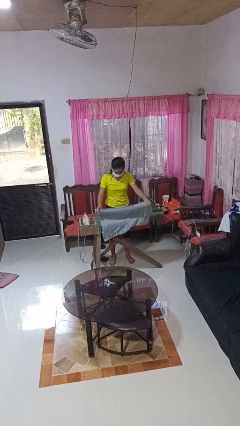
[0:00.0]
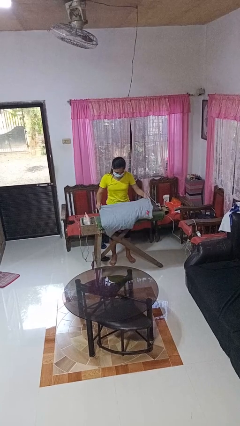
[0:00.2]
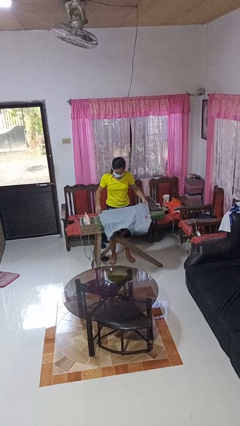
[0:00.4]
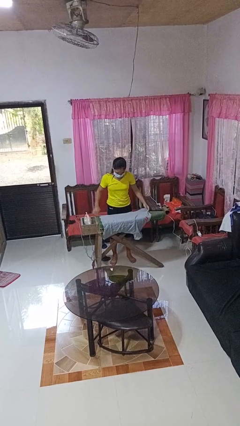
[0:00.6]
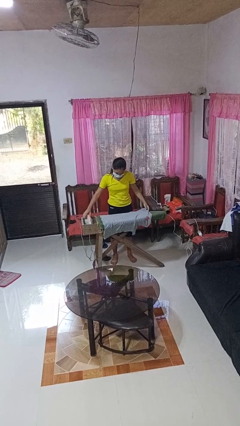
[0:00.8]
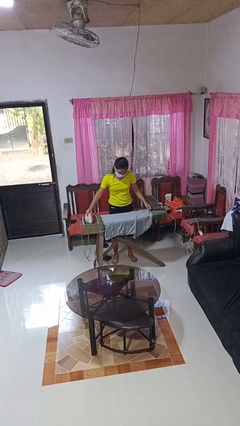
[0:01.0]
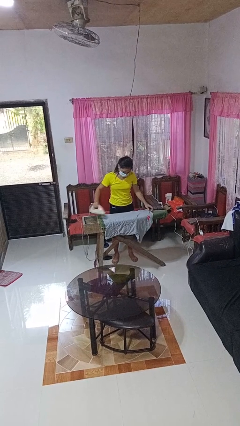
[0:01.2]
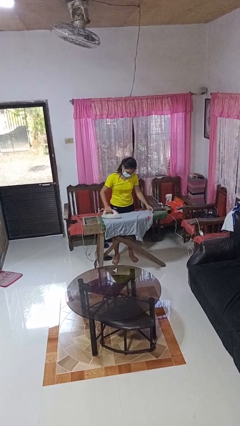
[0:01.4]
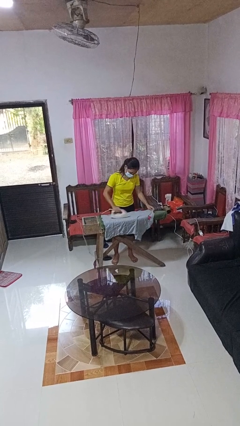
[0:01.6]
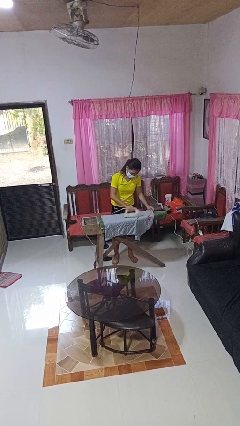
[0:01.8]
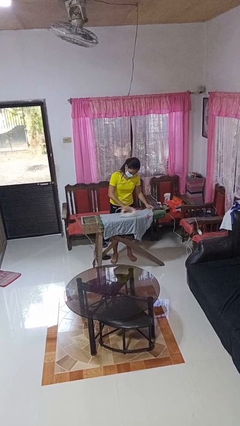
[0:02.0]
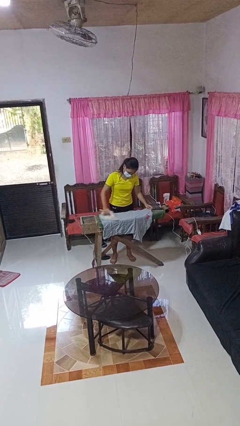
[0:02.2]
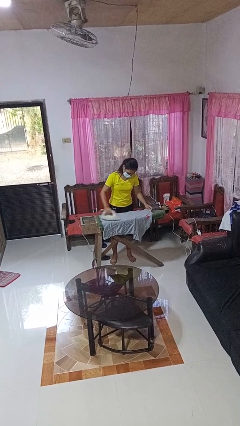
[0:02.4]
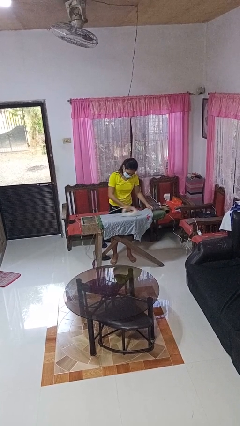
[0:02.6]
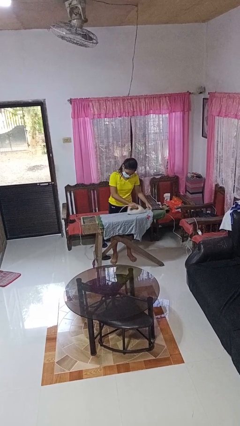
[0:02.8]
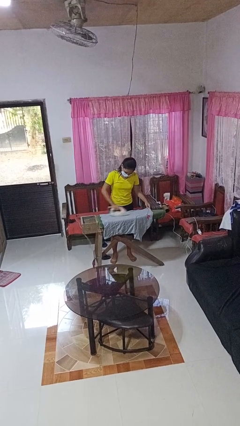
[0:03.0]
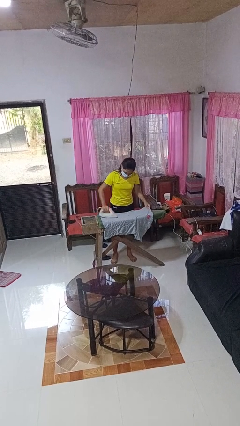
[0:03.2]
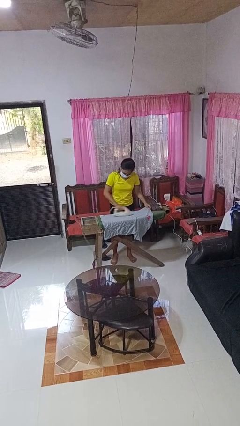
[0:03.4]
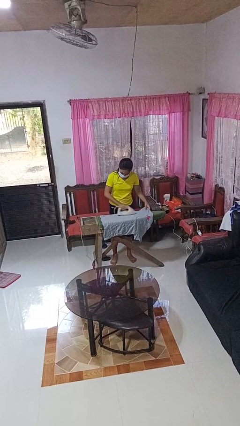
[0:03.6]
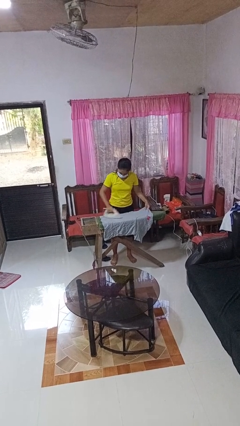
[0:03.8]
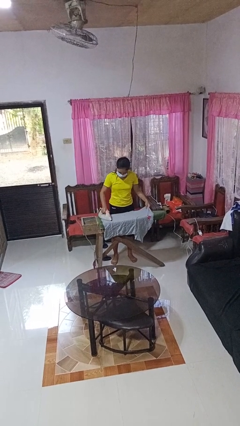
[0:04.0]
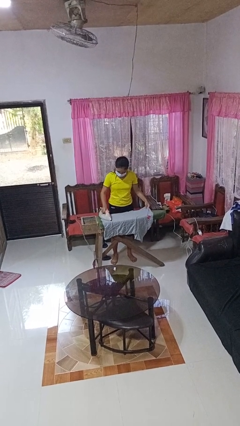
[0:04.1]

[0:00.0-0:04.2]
person irons clothes

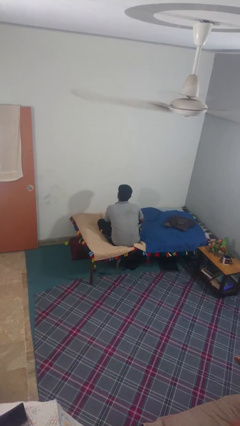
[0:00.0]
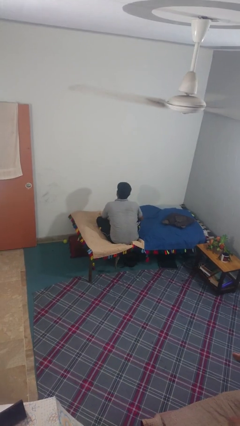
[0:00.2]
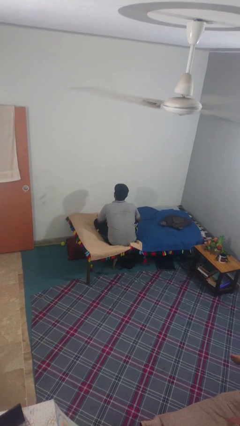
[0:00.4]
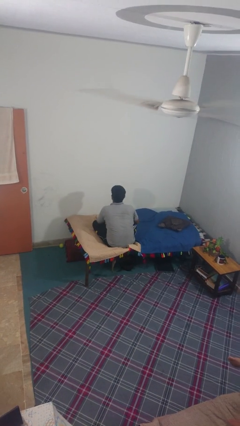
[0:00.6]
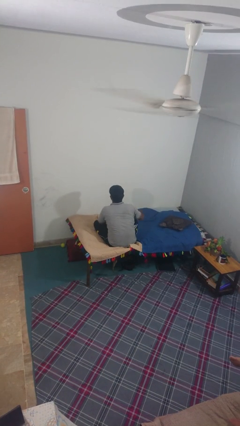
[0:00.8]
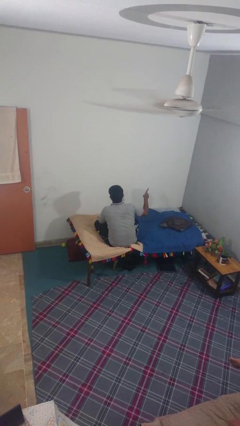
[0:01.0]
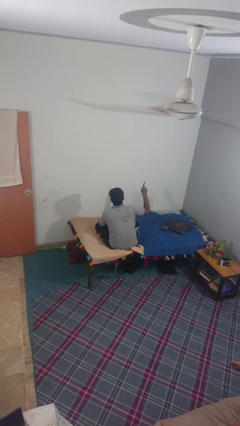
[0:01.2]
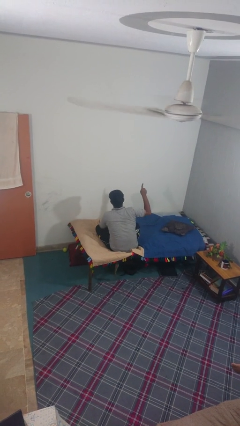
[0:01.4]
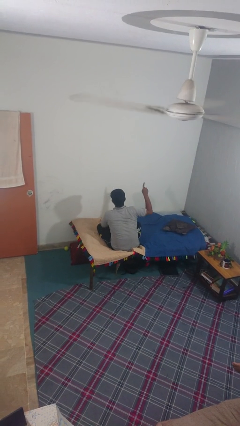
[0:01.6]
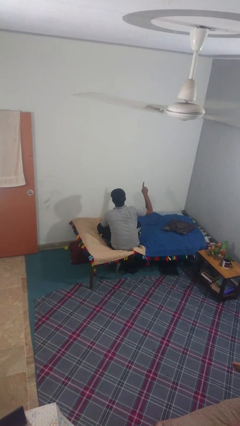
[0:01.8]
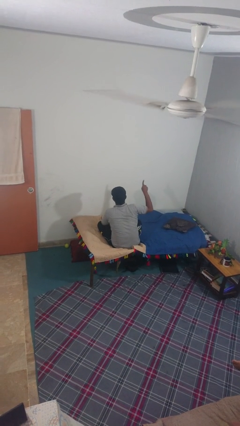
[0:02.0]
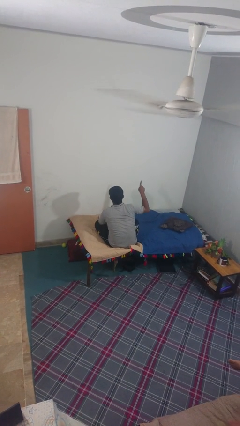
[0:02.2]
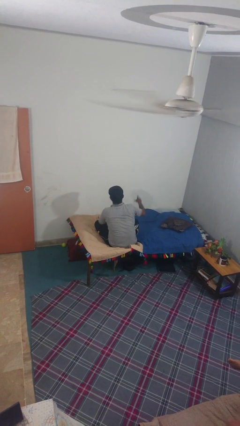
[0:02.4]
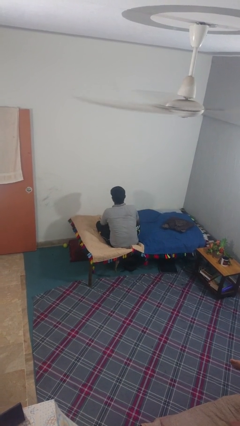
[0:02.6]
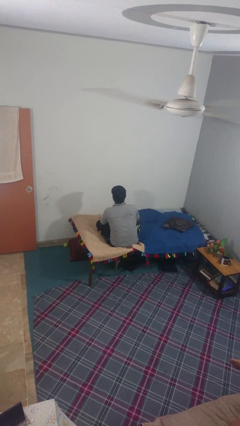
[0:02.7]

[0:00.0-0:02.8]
person gestures number one

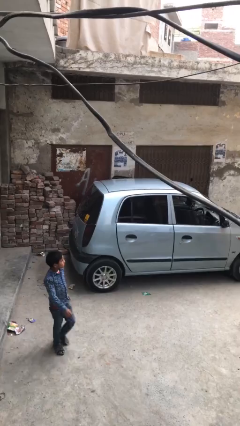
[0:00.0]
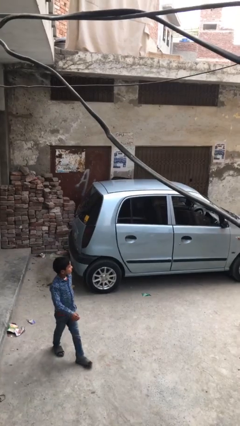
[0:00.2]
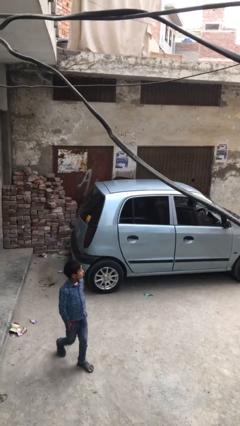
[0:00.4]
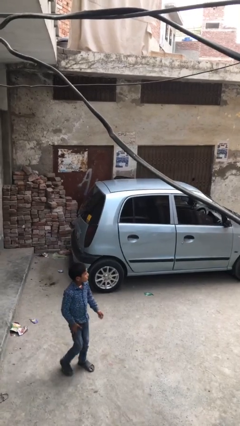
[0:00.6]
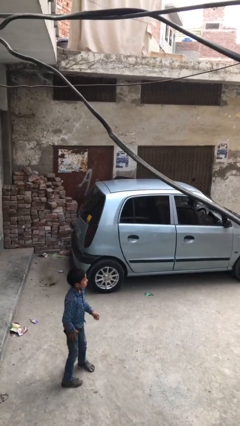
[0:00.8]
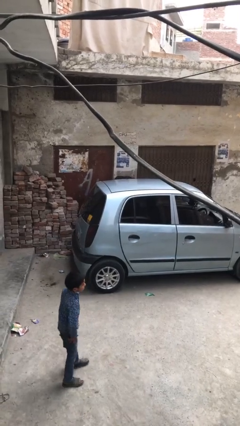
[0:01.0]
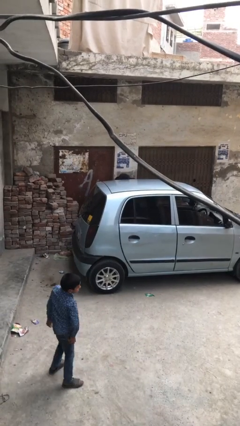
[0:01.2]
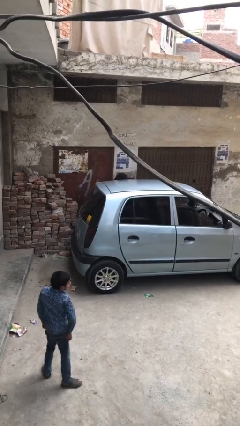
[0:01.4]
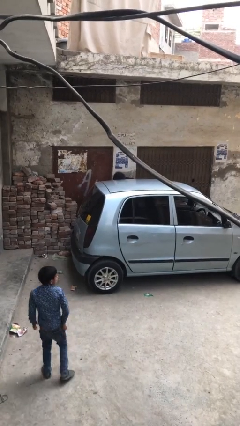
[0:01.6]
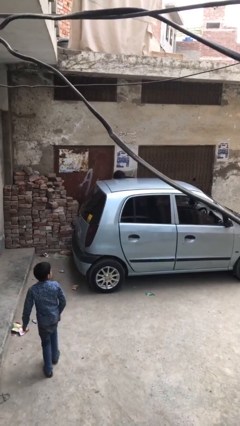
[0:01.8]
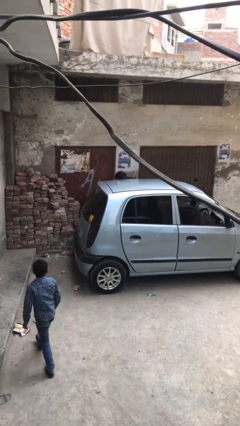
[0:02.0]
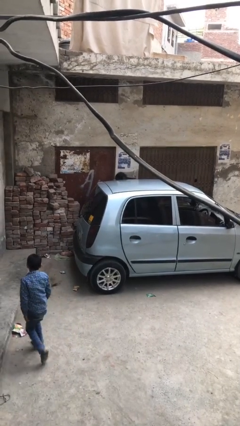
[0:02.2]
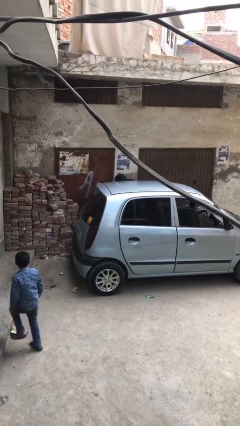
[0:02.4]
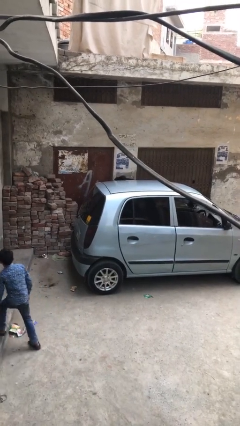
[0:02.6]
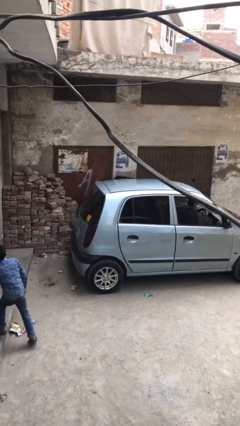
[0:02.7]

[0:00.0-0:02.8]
person exits car

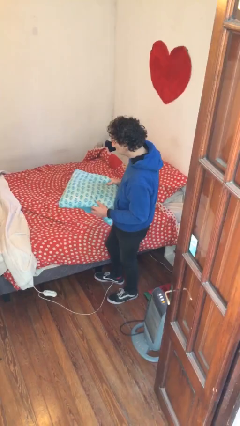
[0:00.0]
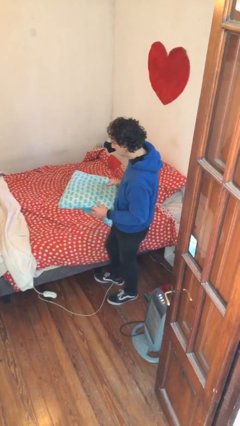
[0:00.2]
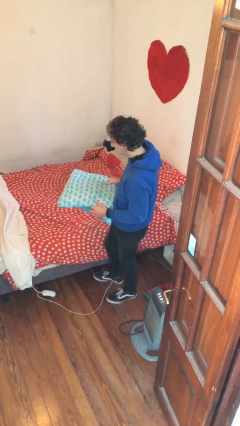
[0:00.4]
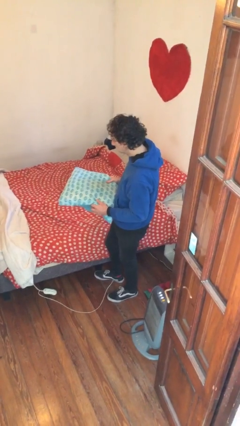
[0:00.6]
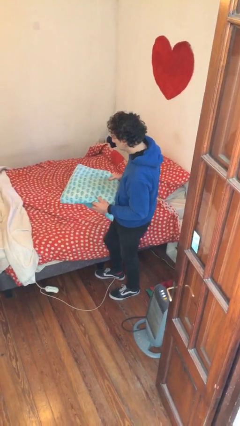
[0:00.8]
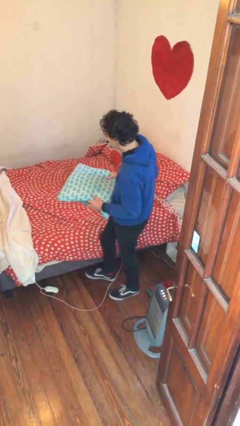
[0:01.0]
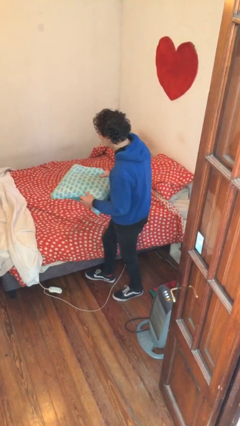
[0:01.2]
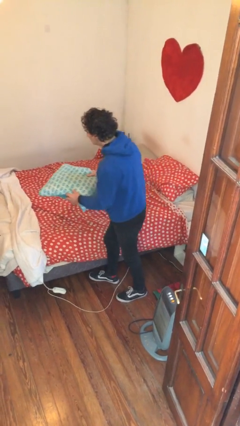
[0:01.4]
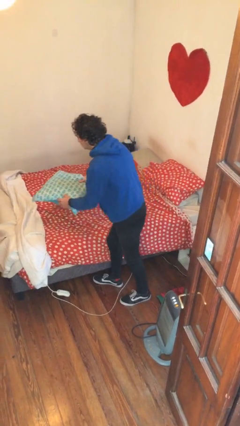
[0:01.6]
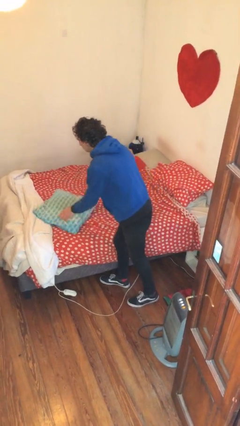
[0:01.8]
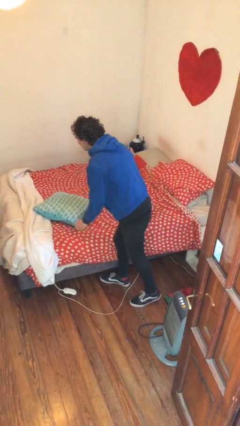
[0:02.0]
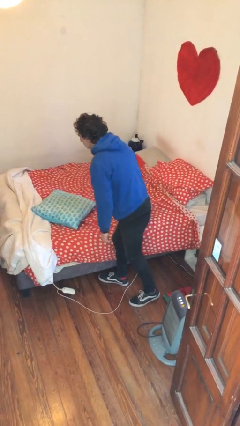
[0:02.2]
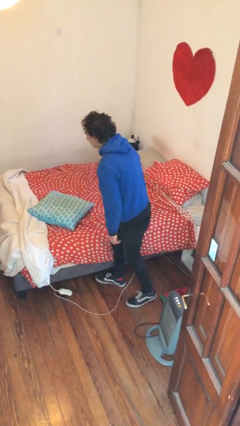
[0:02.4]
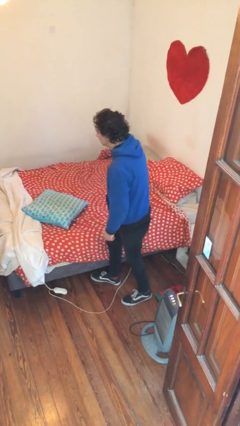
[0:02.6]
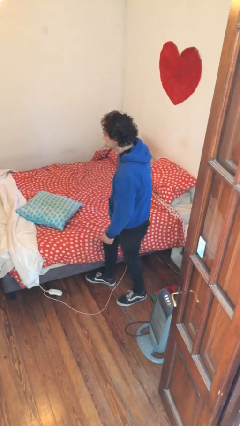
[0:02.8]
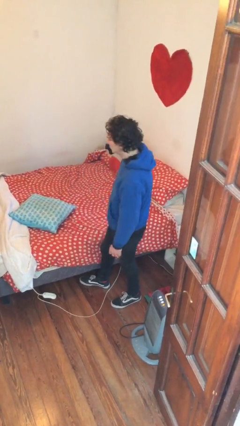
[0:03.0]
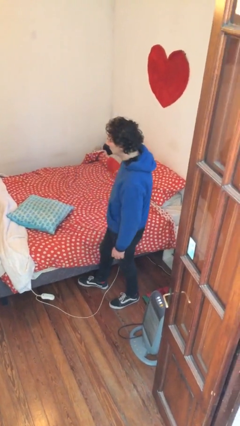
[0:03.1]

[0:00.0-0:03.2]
person puts down object on bed

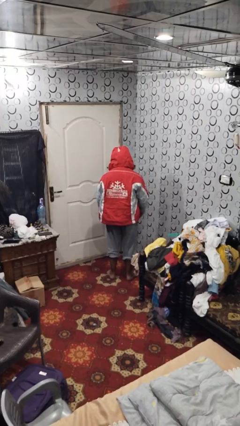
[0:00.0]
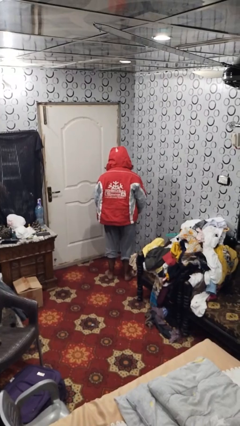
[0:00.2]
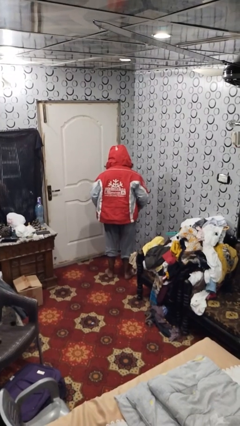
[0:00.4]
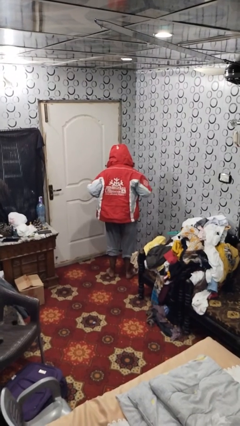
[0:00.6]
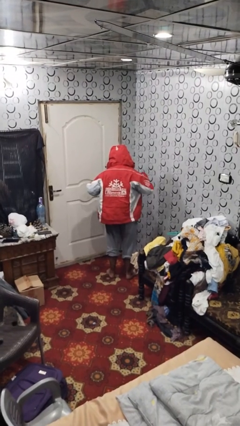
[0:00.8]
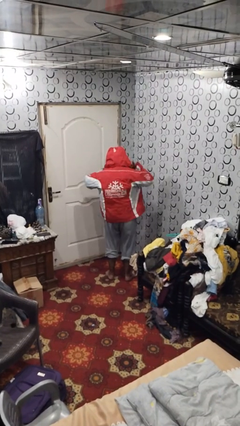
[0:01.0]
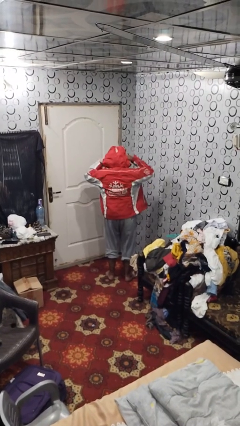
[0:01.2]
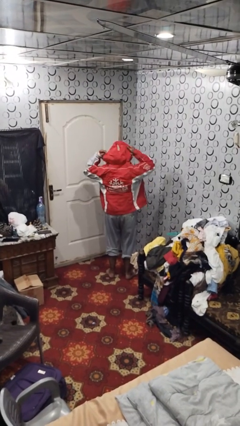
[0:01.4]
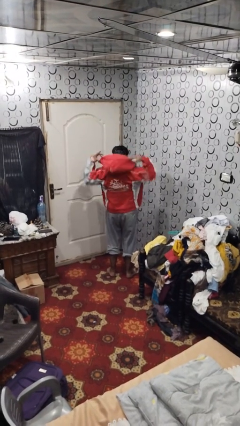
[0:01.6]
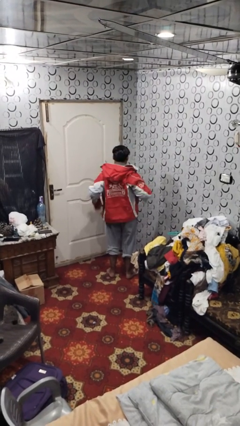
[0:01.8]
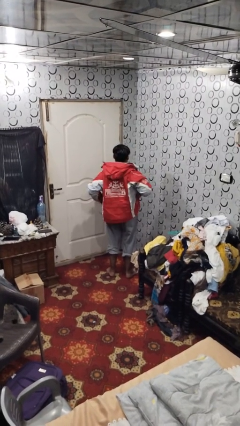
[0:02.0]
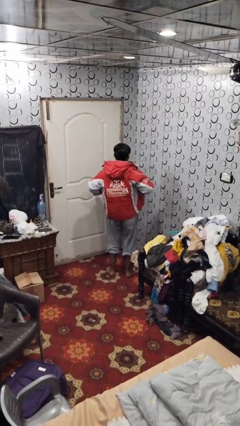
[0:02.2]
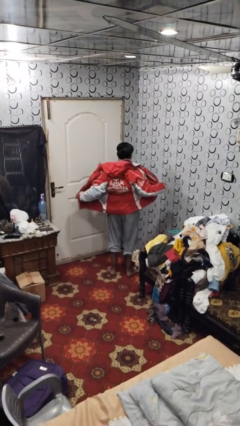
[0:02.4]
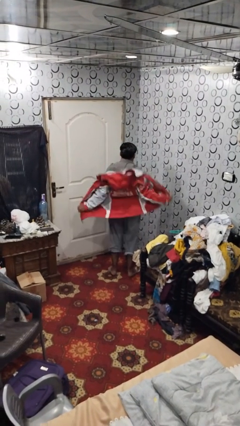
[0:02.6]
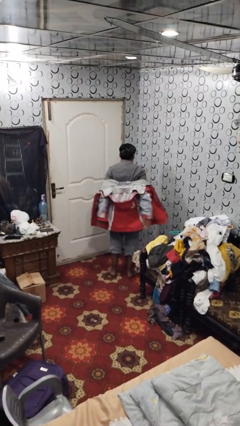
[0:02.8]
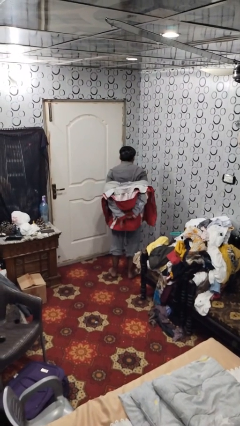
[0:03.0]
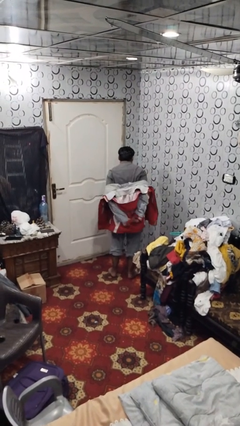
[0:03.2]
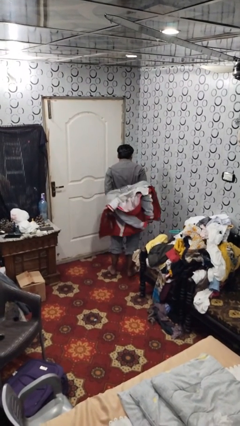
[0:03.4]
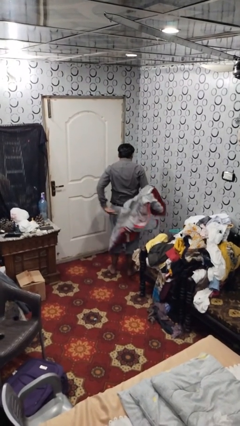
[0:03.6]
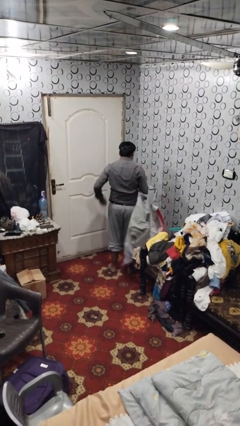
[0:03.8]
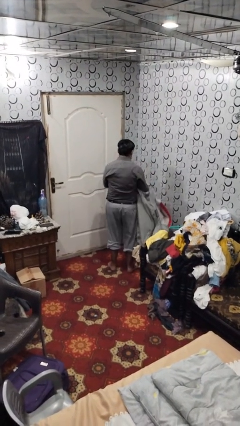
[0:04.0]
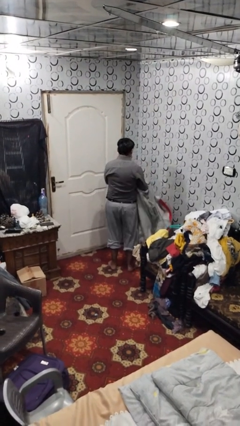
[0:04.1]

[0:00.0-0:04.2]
person takes off hoodie

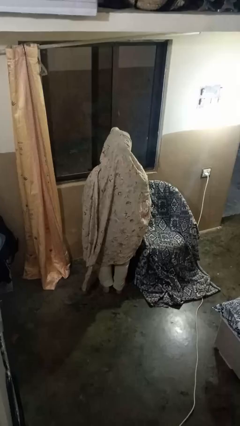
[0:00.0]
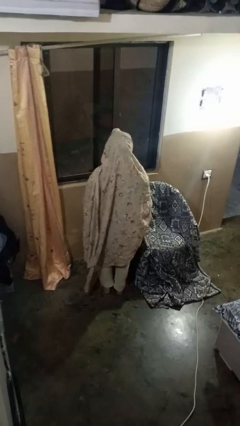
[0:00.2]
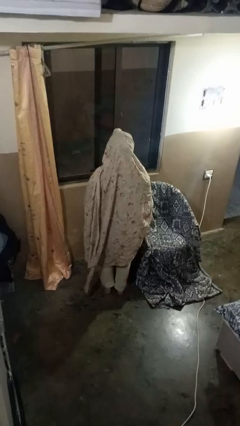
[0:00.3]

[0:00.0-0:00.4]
person puts down object on couch
